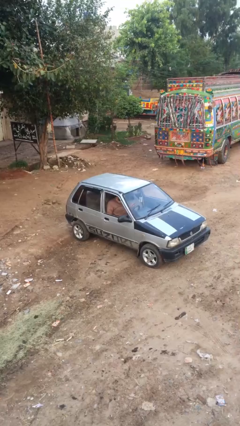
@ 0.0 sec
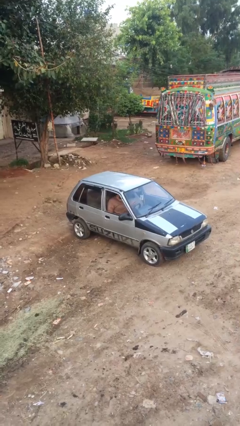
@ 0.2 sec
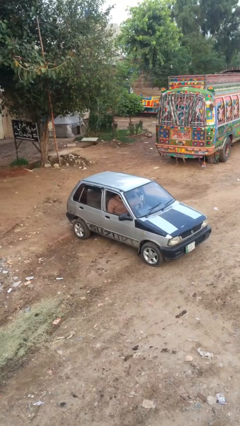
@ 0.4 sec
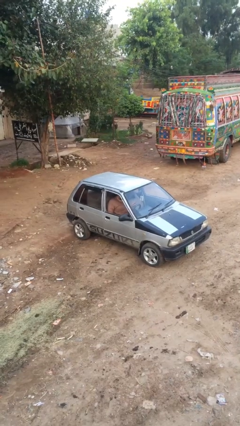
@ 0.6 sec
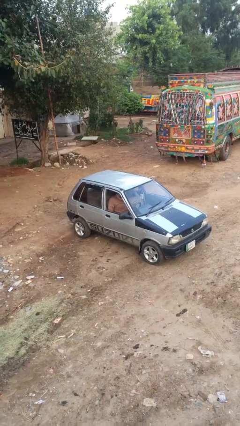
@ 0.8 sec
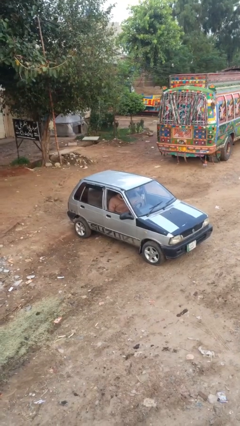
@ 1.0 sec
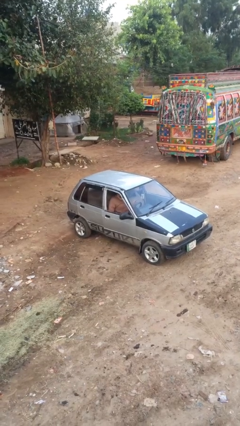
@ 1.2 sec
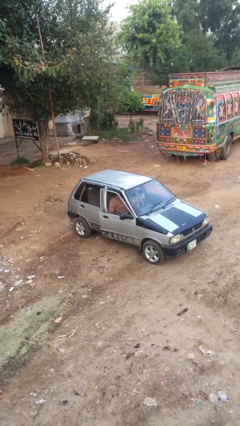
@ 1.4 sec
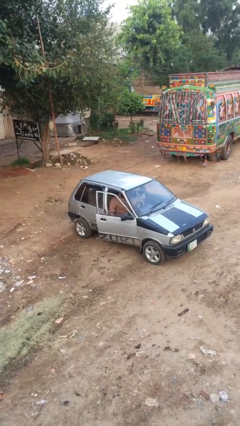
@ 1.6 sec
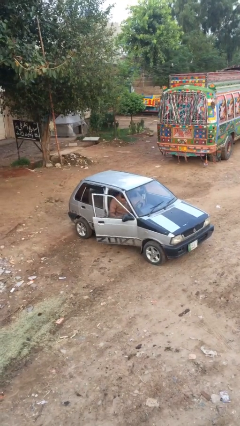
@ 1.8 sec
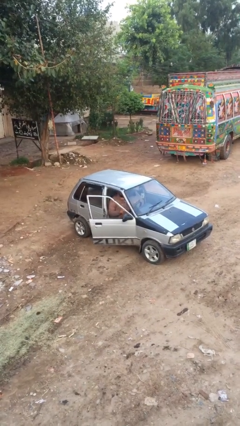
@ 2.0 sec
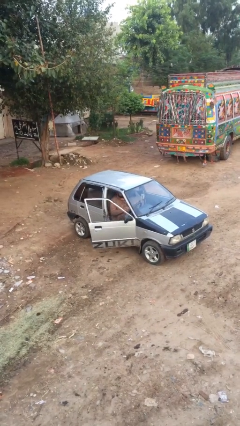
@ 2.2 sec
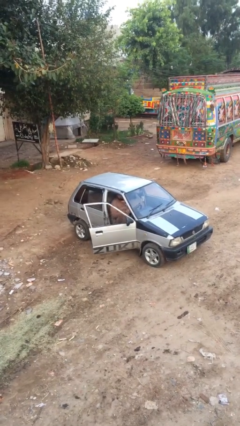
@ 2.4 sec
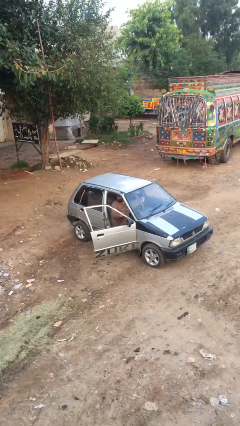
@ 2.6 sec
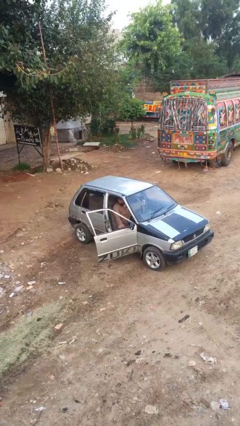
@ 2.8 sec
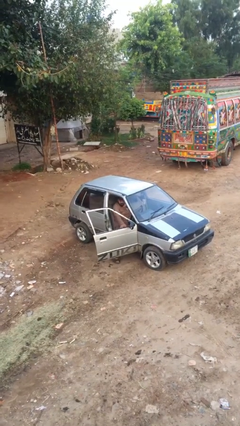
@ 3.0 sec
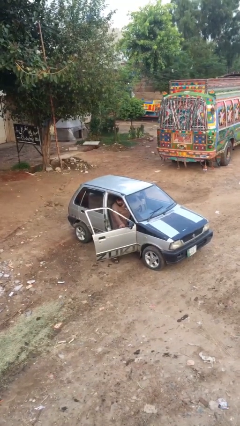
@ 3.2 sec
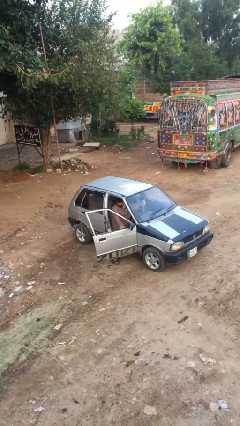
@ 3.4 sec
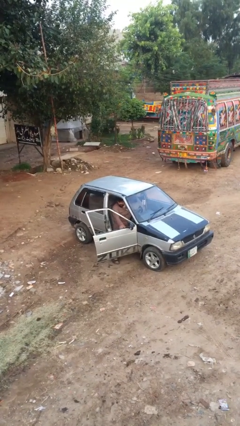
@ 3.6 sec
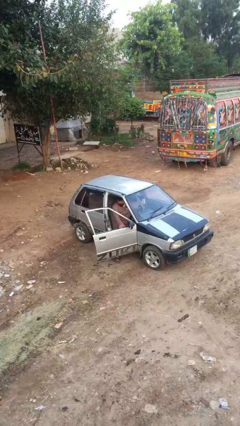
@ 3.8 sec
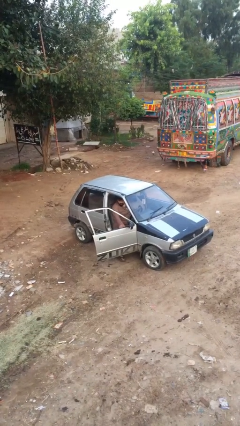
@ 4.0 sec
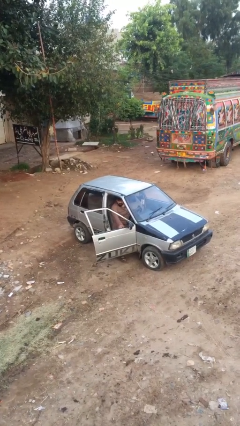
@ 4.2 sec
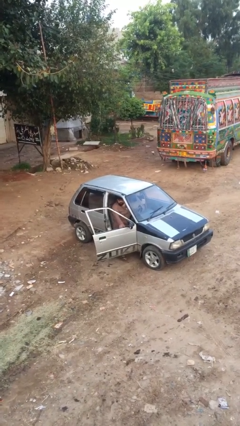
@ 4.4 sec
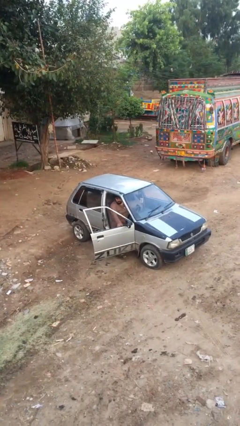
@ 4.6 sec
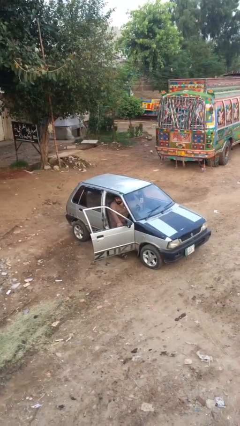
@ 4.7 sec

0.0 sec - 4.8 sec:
person opens car door

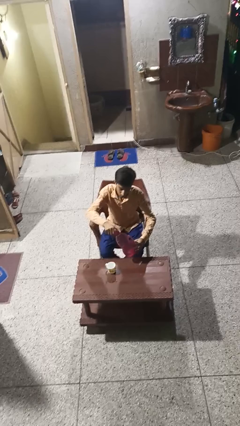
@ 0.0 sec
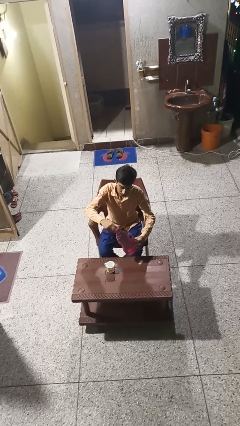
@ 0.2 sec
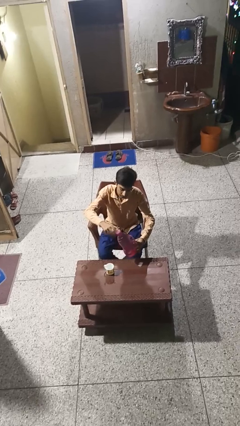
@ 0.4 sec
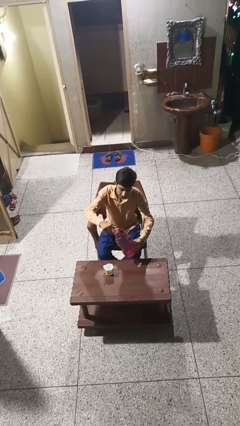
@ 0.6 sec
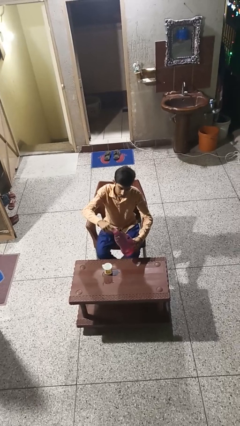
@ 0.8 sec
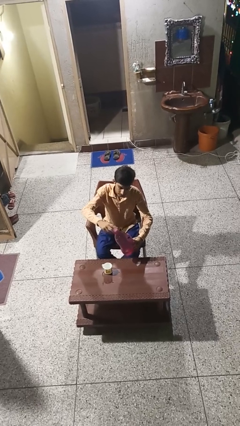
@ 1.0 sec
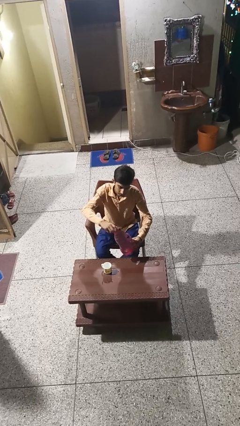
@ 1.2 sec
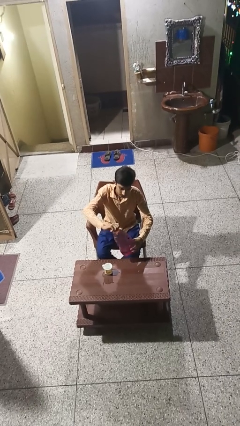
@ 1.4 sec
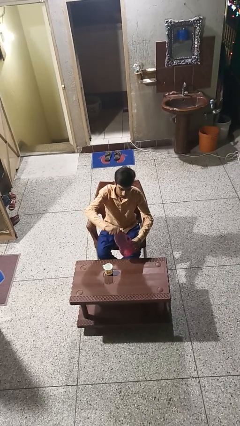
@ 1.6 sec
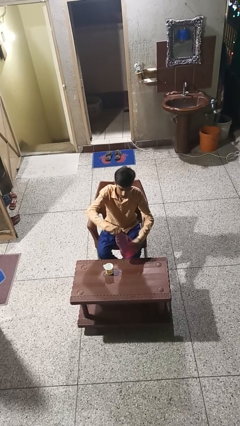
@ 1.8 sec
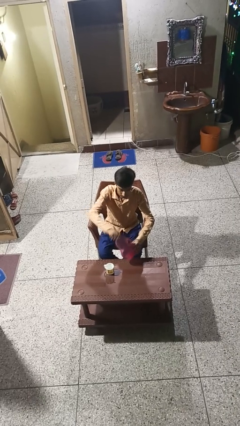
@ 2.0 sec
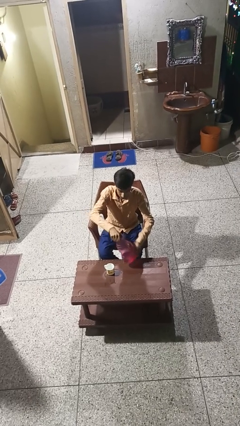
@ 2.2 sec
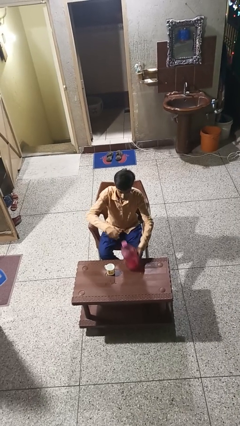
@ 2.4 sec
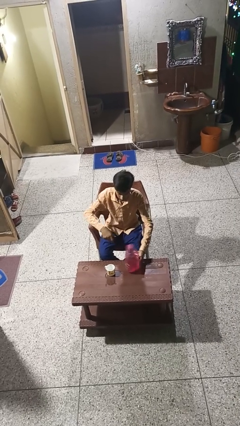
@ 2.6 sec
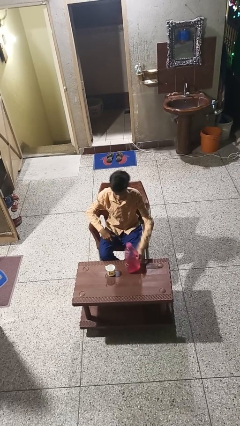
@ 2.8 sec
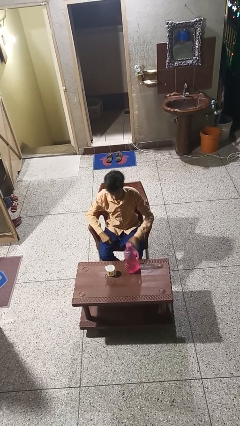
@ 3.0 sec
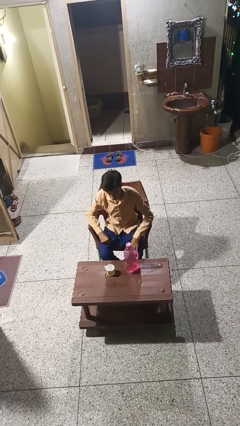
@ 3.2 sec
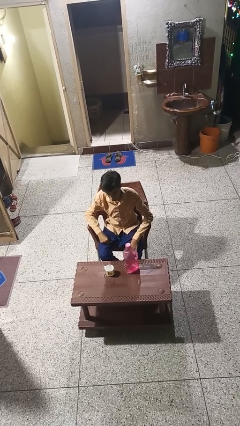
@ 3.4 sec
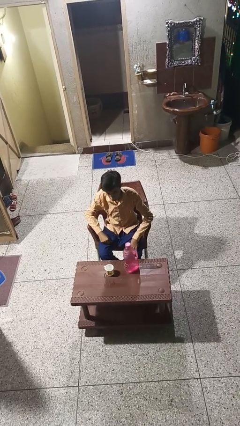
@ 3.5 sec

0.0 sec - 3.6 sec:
person screws lid to bottle

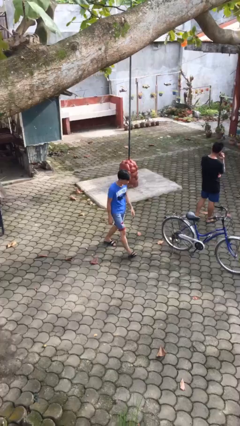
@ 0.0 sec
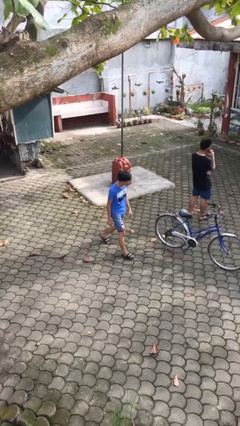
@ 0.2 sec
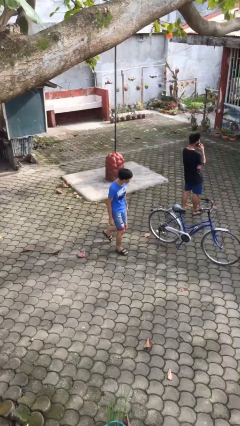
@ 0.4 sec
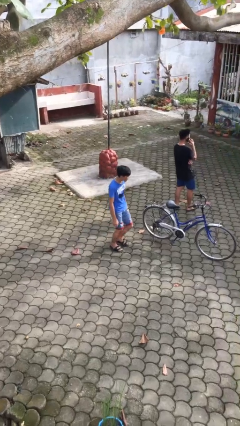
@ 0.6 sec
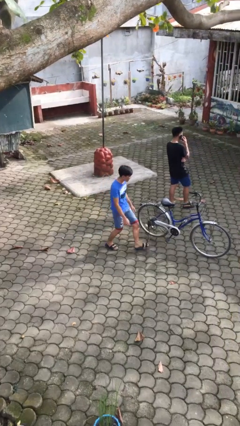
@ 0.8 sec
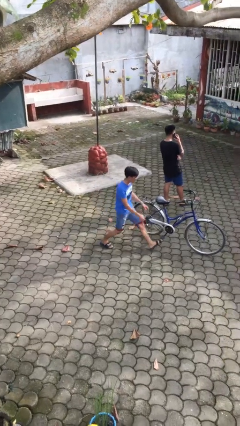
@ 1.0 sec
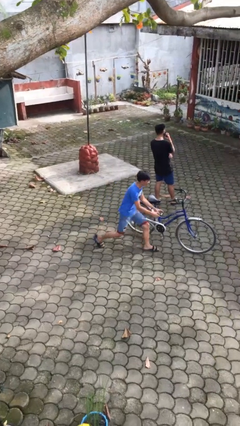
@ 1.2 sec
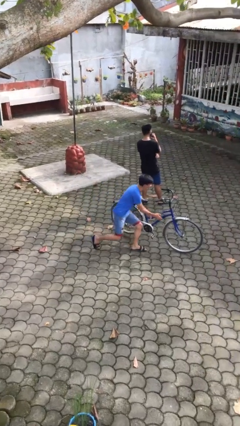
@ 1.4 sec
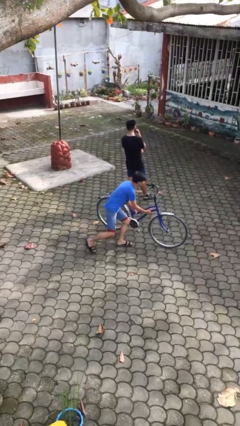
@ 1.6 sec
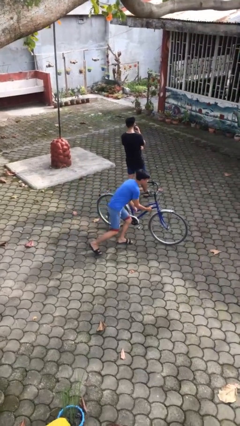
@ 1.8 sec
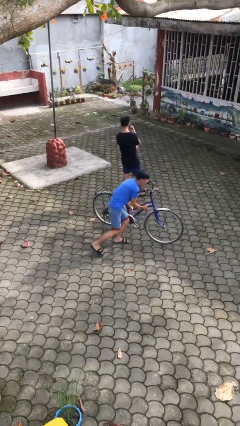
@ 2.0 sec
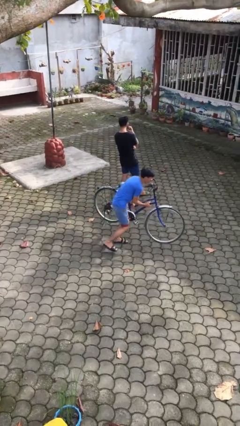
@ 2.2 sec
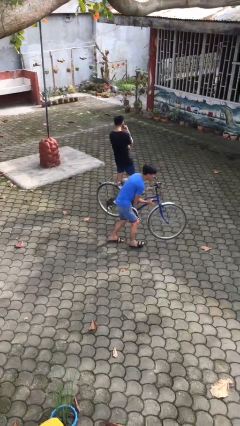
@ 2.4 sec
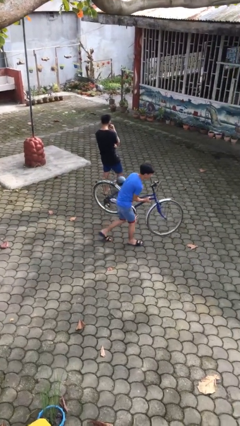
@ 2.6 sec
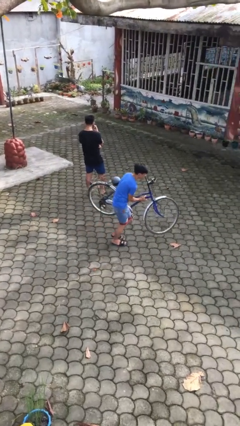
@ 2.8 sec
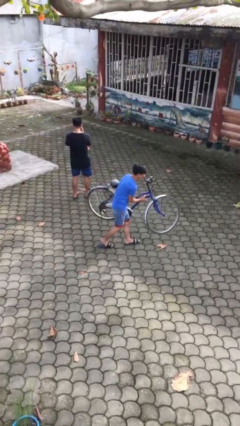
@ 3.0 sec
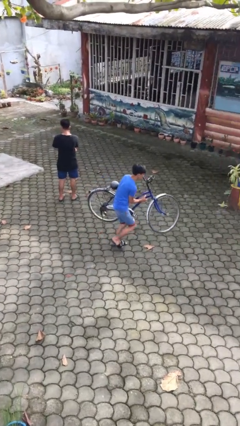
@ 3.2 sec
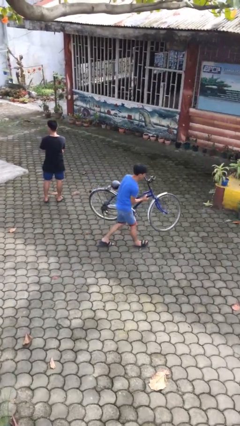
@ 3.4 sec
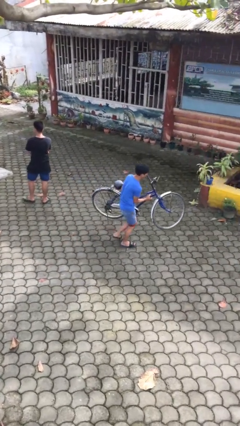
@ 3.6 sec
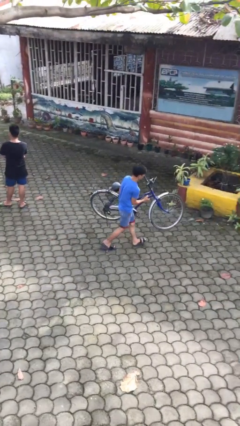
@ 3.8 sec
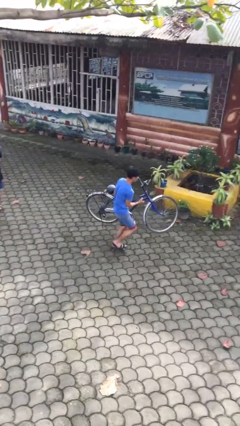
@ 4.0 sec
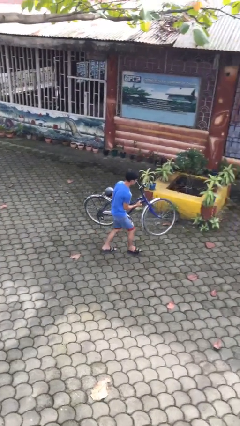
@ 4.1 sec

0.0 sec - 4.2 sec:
person steals object from person

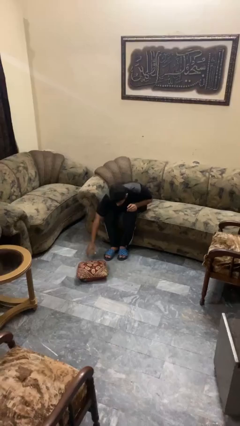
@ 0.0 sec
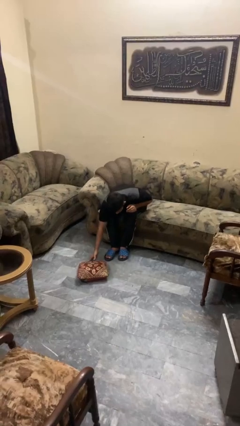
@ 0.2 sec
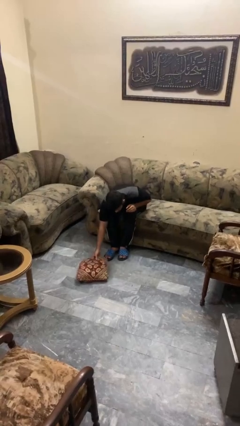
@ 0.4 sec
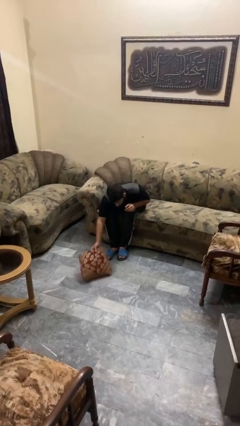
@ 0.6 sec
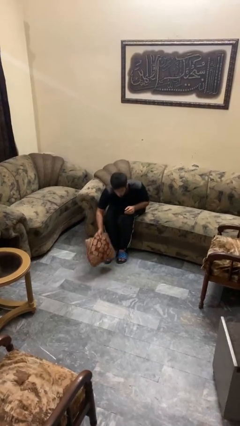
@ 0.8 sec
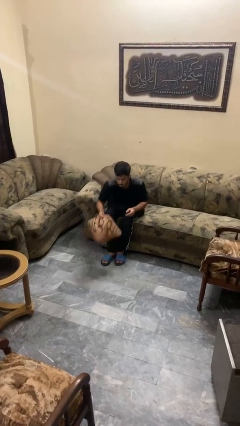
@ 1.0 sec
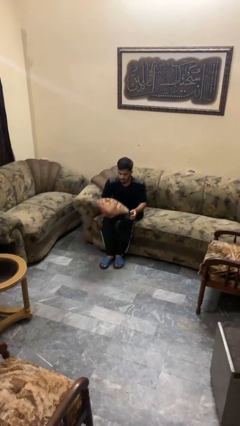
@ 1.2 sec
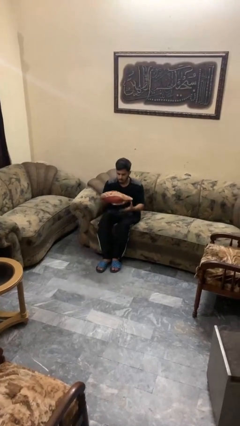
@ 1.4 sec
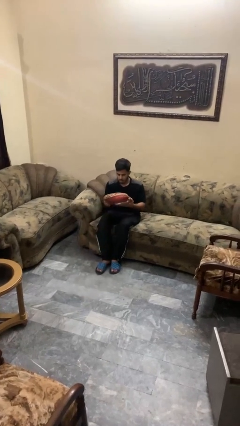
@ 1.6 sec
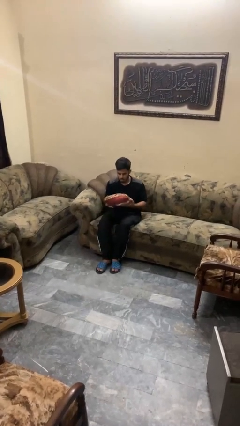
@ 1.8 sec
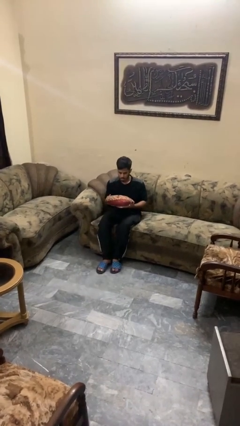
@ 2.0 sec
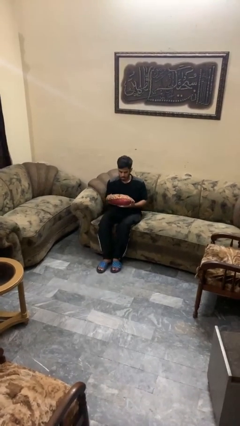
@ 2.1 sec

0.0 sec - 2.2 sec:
person picks up object from floor

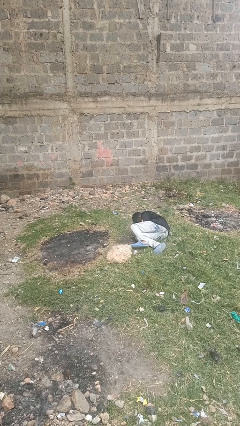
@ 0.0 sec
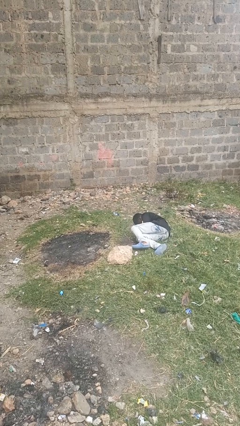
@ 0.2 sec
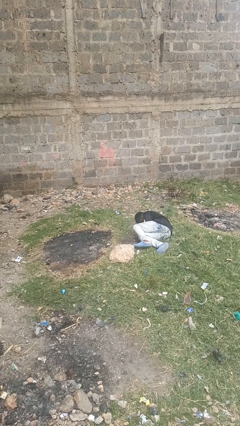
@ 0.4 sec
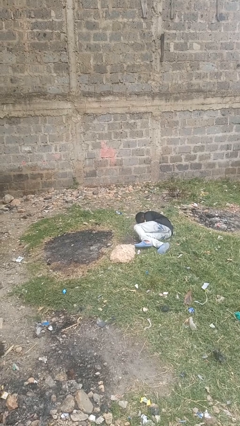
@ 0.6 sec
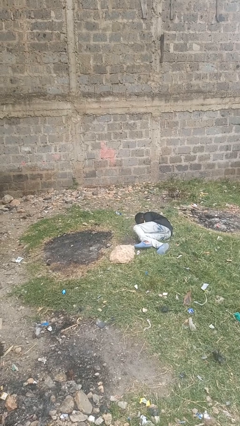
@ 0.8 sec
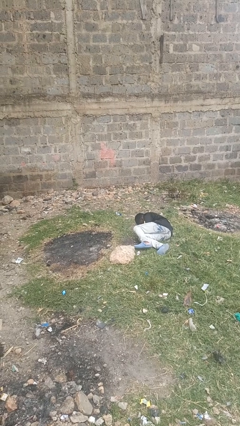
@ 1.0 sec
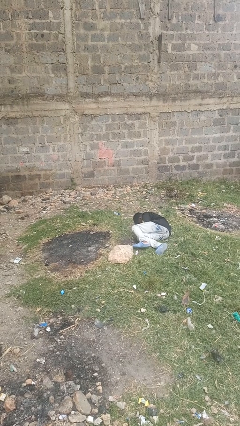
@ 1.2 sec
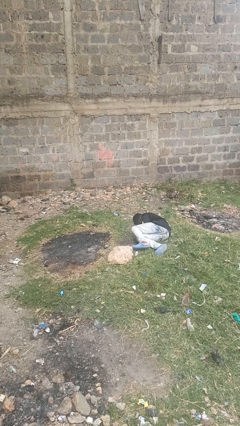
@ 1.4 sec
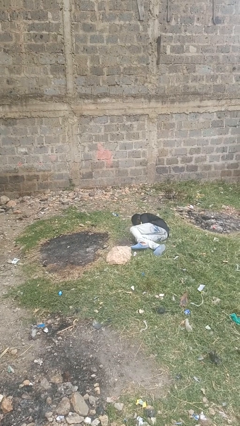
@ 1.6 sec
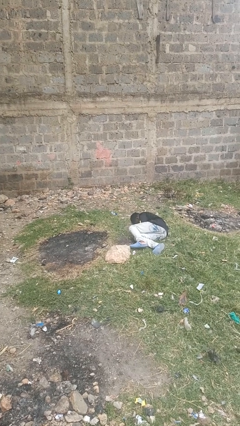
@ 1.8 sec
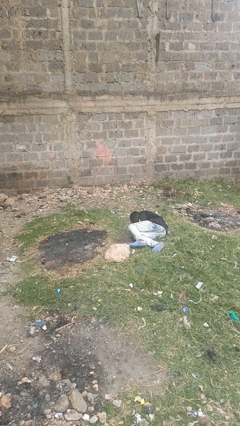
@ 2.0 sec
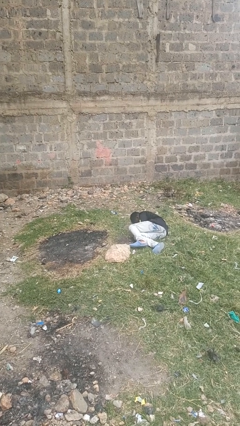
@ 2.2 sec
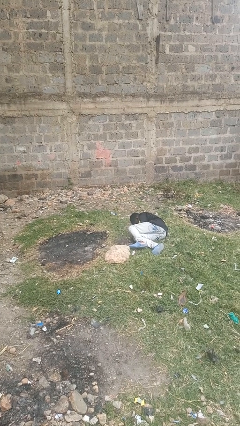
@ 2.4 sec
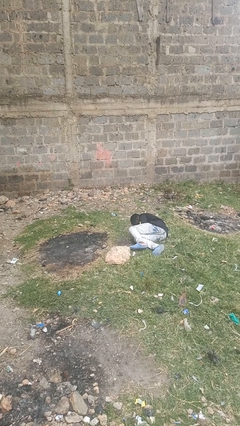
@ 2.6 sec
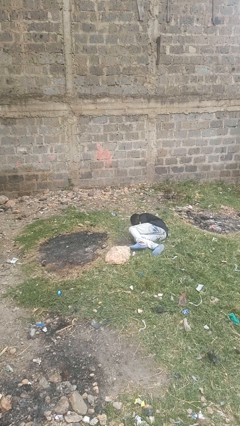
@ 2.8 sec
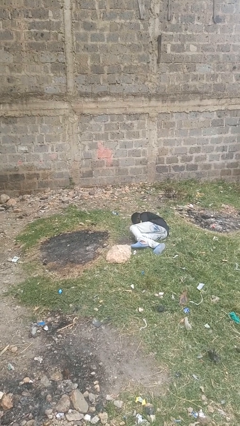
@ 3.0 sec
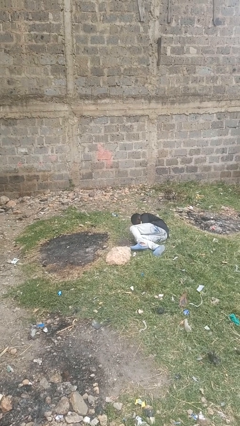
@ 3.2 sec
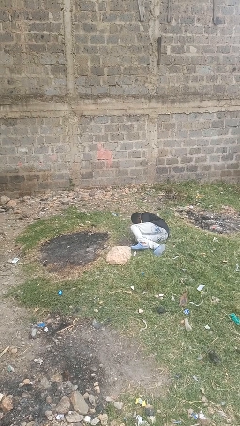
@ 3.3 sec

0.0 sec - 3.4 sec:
person lies down on floor
